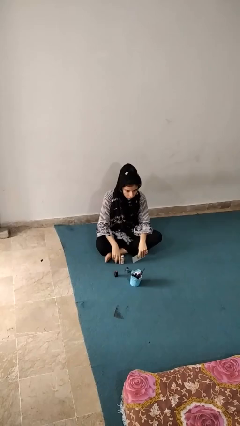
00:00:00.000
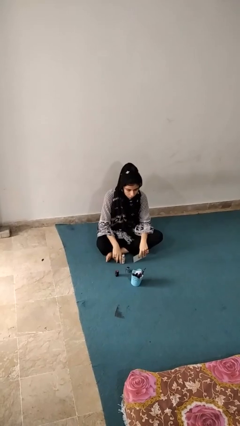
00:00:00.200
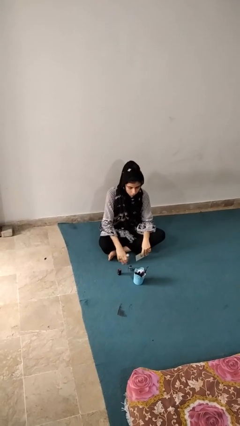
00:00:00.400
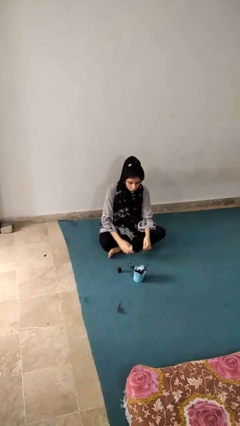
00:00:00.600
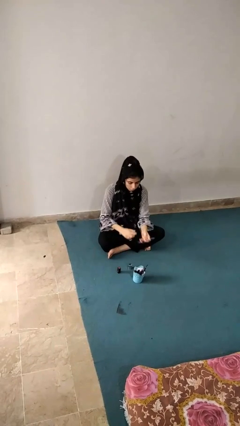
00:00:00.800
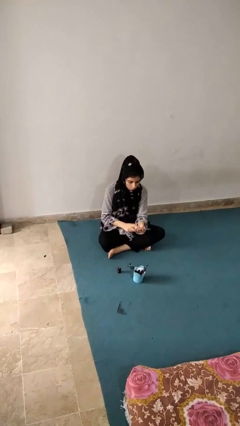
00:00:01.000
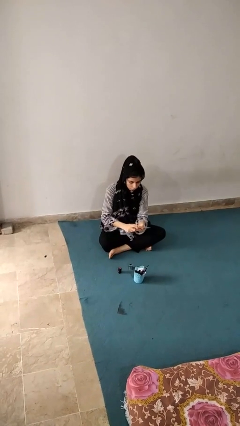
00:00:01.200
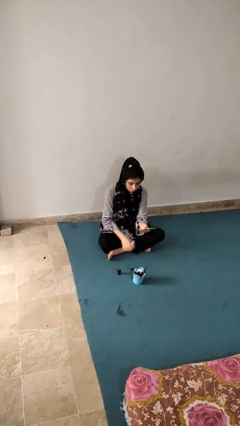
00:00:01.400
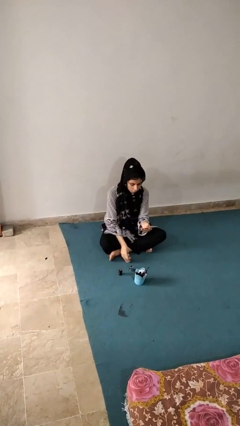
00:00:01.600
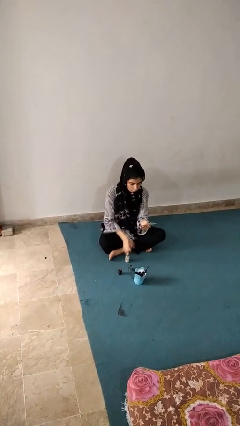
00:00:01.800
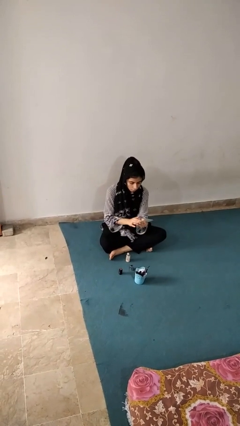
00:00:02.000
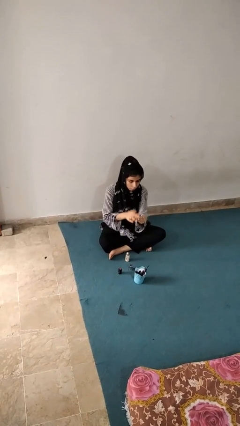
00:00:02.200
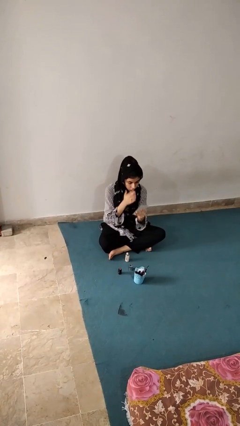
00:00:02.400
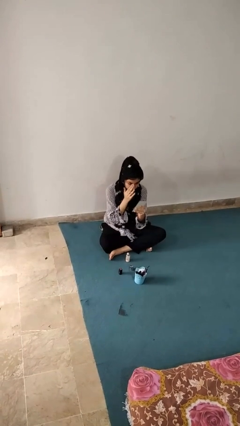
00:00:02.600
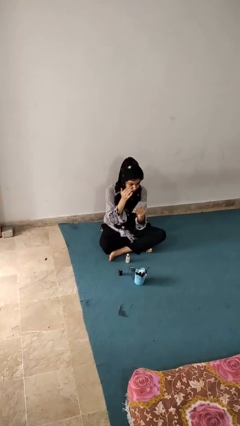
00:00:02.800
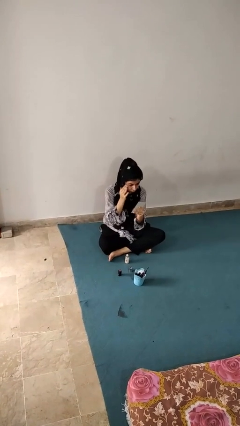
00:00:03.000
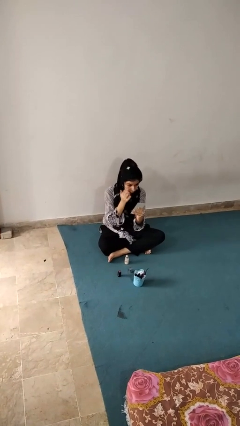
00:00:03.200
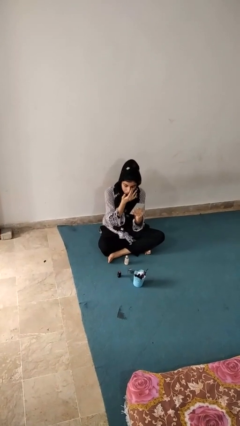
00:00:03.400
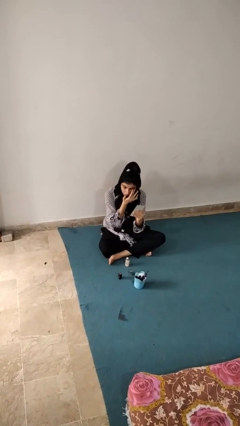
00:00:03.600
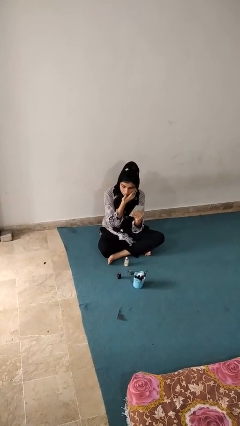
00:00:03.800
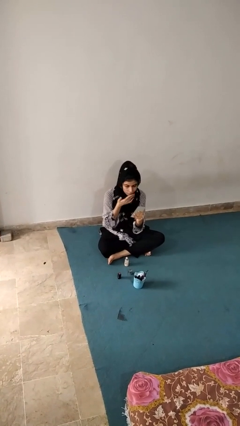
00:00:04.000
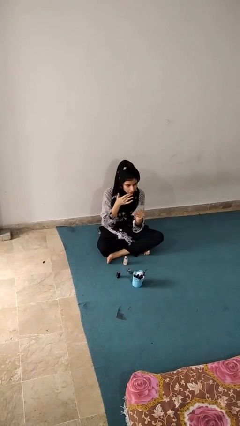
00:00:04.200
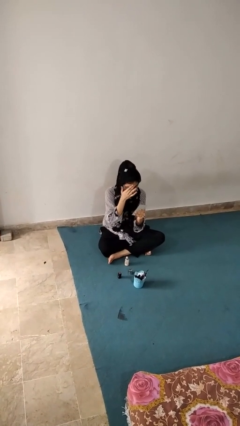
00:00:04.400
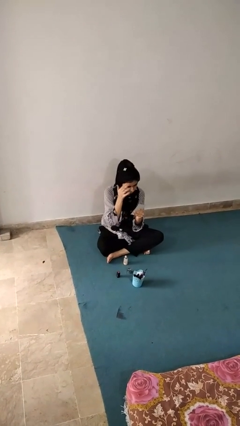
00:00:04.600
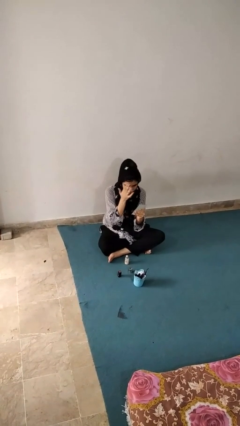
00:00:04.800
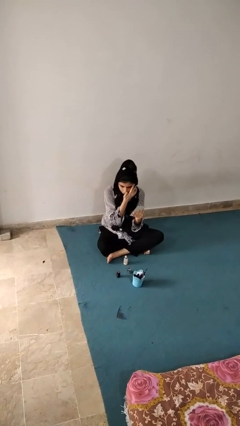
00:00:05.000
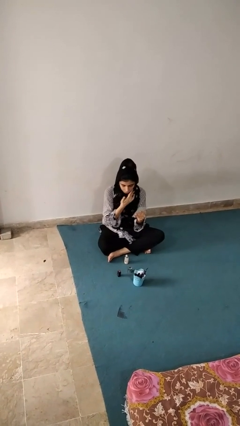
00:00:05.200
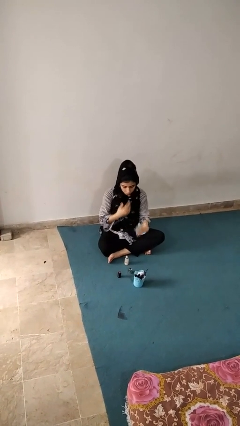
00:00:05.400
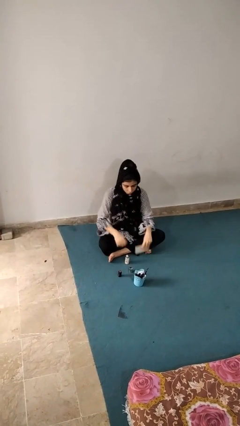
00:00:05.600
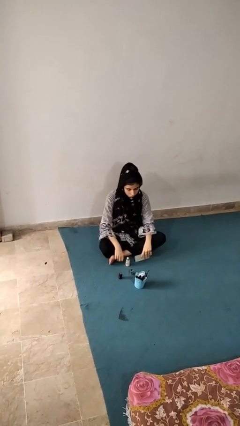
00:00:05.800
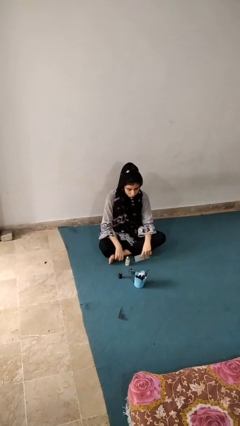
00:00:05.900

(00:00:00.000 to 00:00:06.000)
person applies foundation makeup

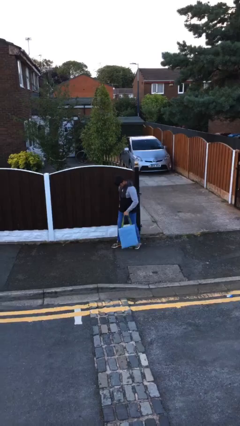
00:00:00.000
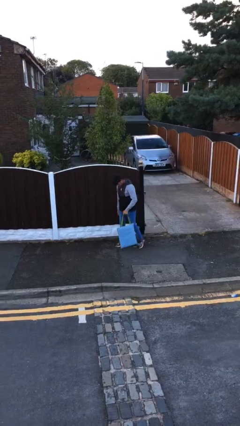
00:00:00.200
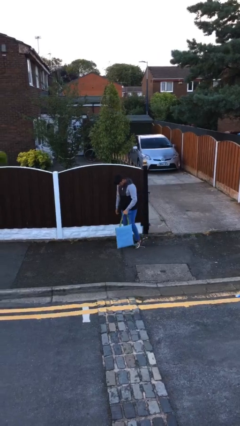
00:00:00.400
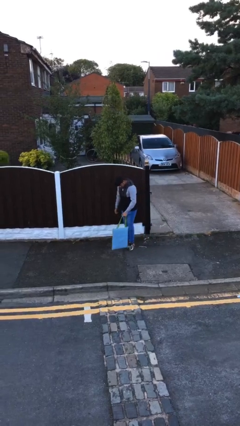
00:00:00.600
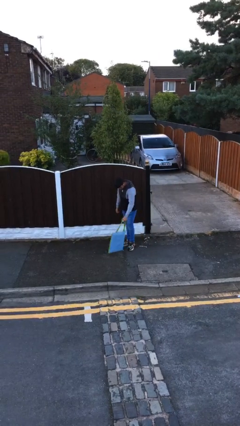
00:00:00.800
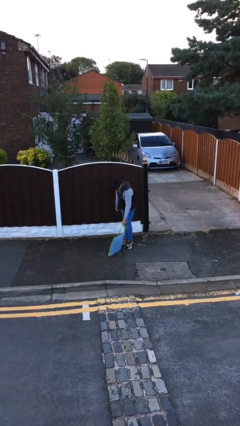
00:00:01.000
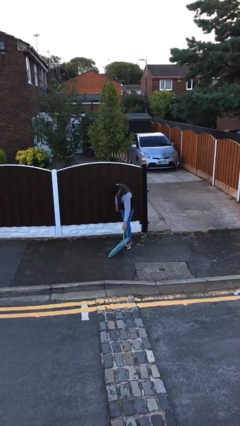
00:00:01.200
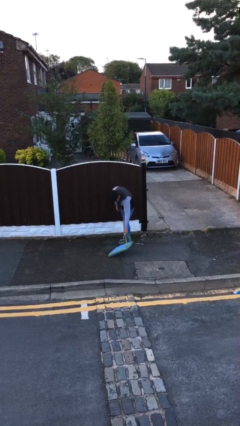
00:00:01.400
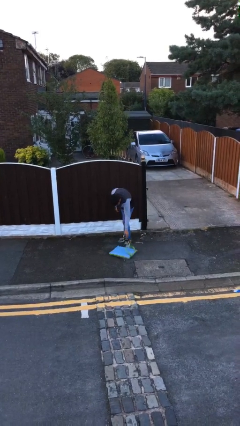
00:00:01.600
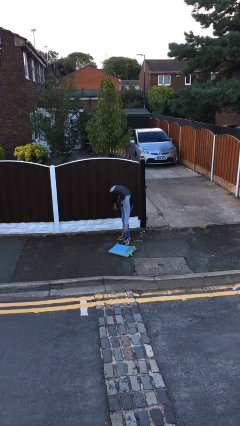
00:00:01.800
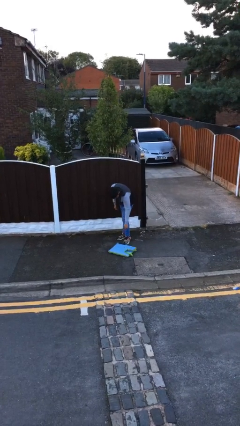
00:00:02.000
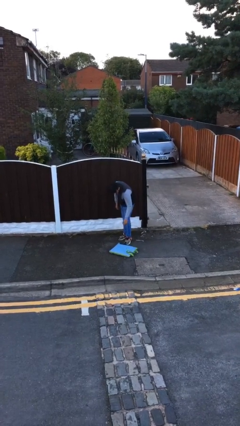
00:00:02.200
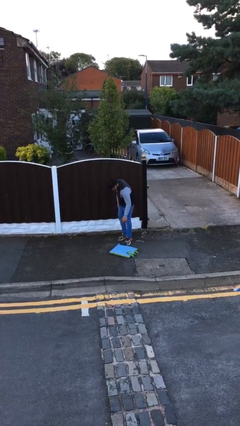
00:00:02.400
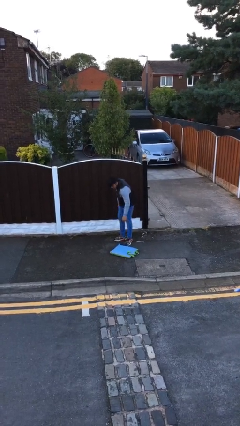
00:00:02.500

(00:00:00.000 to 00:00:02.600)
person puts down object on floor

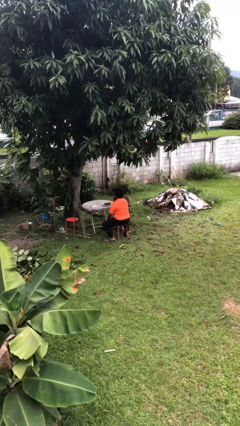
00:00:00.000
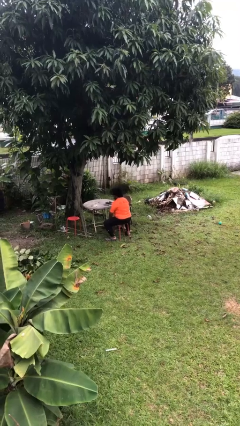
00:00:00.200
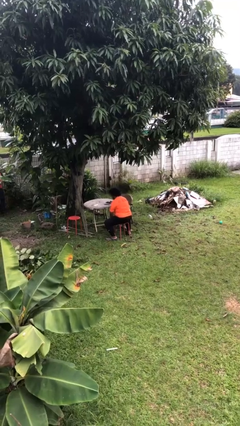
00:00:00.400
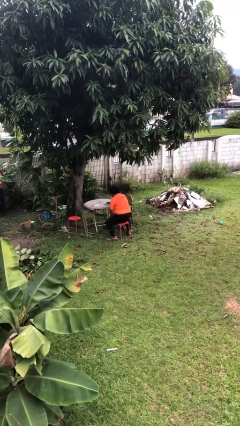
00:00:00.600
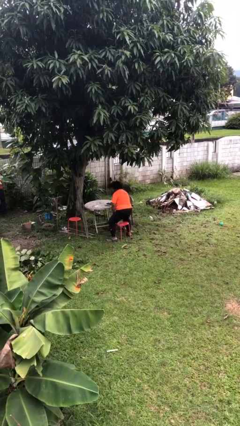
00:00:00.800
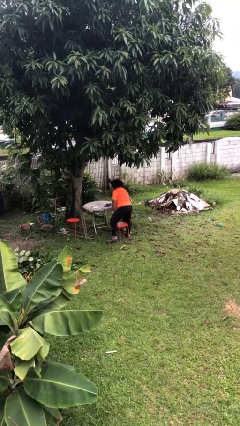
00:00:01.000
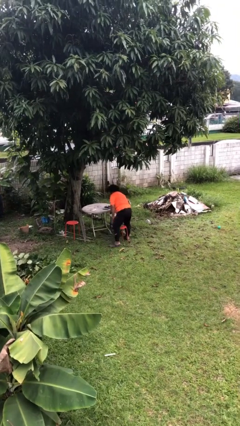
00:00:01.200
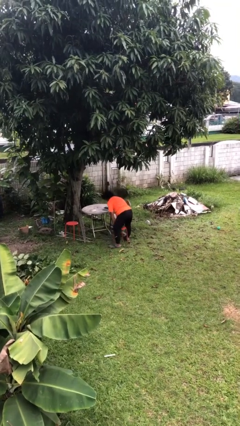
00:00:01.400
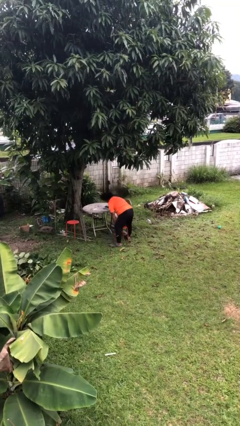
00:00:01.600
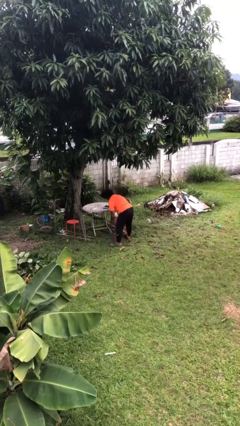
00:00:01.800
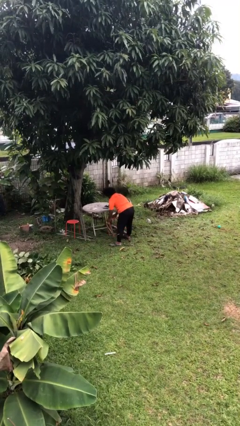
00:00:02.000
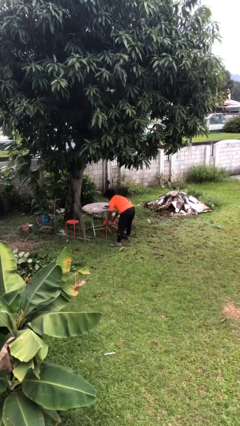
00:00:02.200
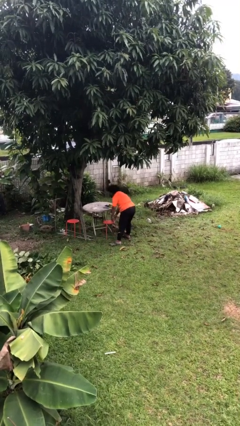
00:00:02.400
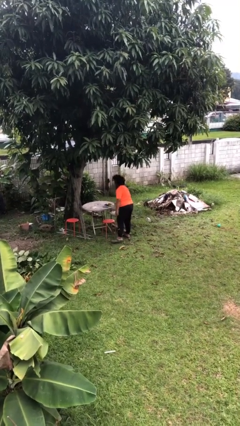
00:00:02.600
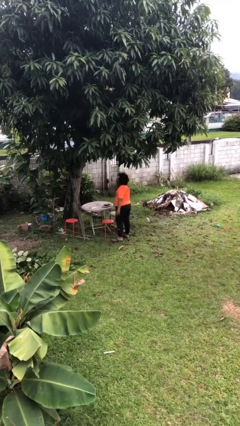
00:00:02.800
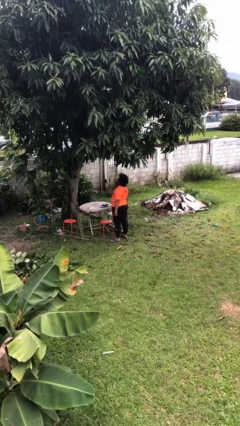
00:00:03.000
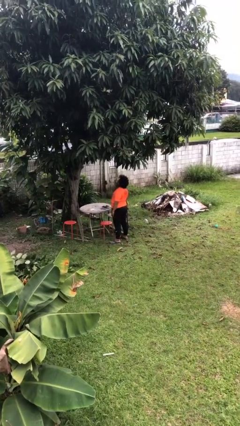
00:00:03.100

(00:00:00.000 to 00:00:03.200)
person stands up

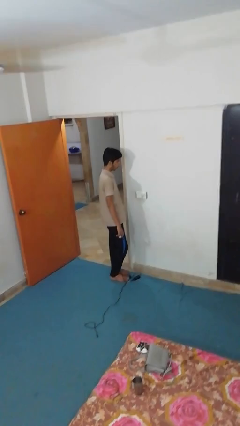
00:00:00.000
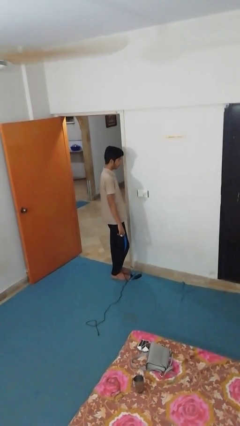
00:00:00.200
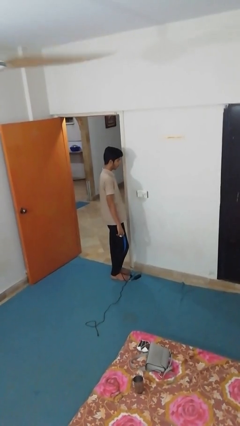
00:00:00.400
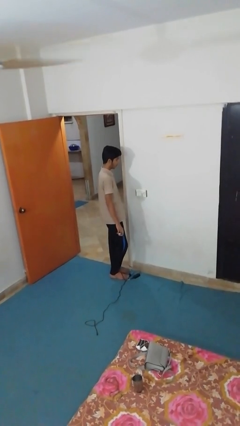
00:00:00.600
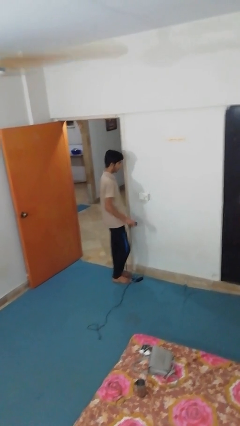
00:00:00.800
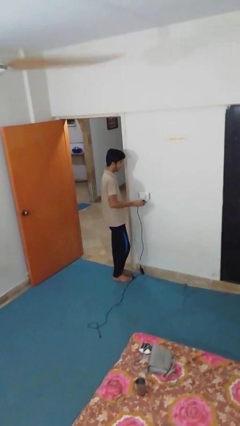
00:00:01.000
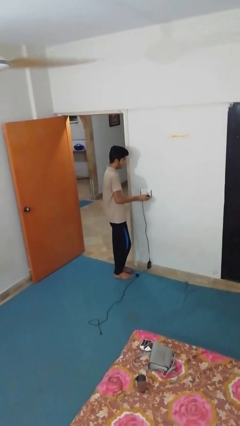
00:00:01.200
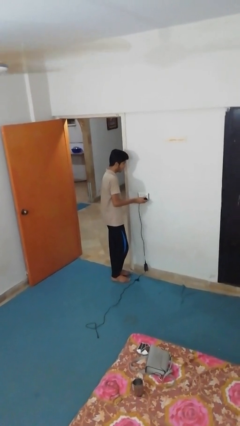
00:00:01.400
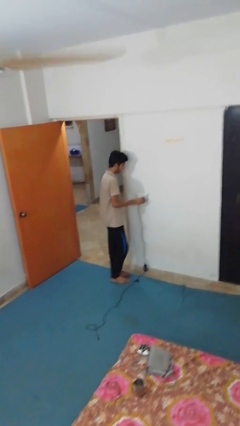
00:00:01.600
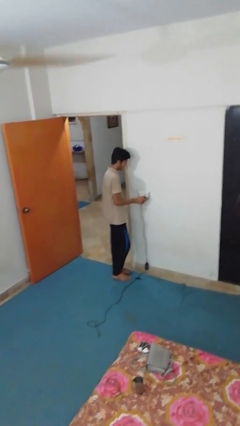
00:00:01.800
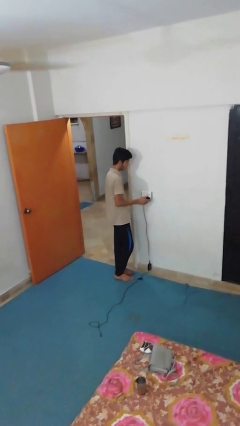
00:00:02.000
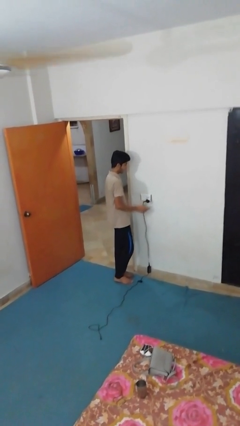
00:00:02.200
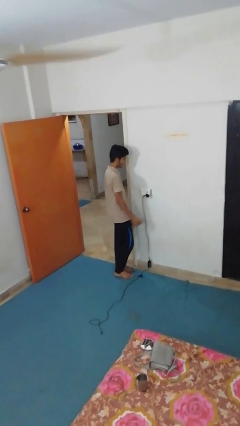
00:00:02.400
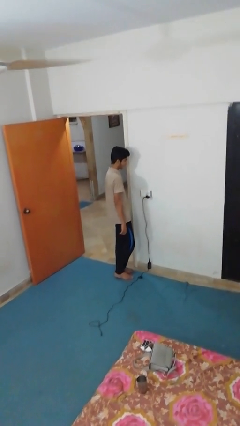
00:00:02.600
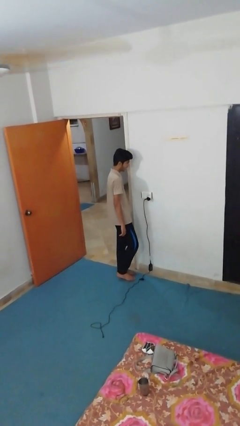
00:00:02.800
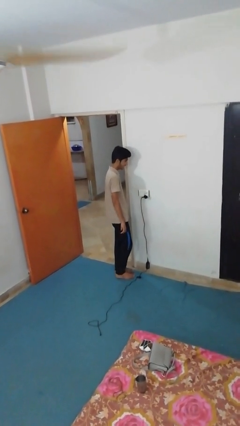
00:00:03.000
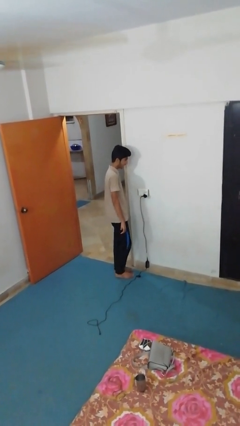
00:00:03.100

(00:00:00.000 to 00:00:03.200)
person plugs into electrical socket

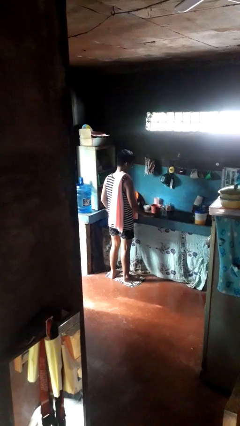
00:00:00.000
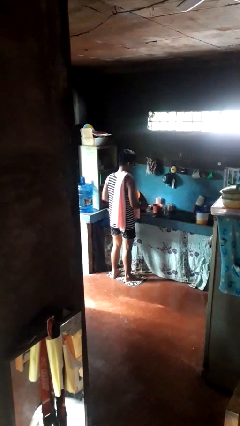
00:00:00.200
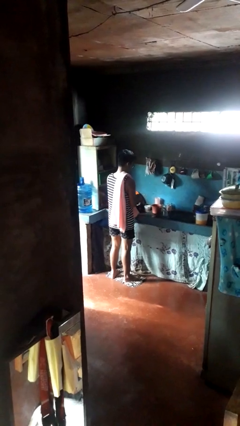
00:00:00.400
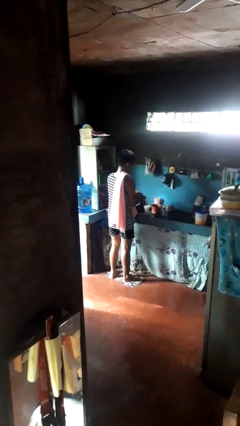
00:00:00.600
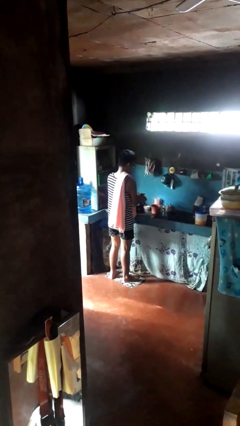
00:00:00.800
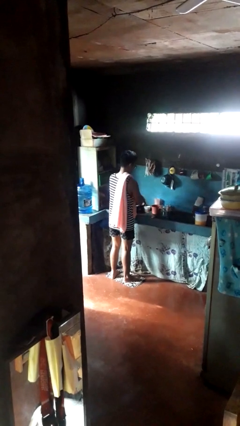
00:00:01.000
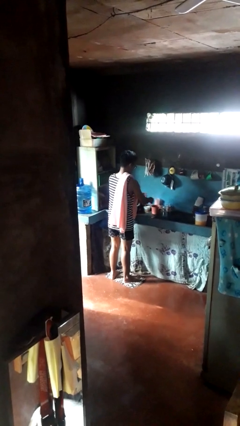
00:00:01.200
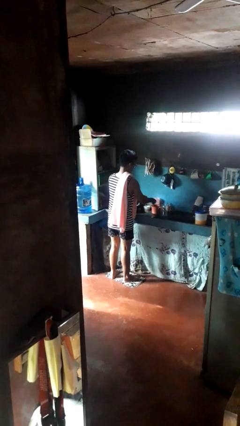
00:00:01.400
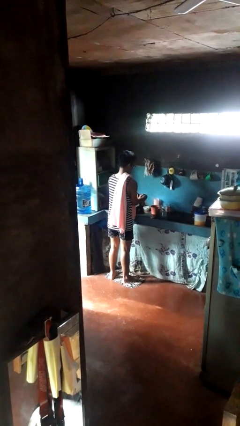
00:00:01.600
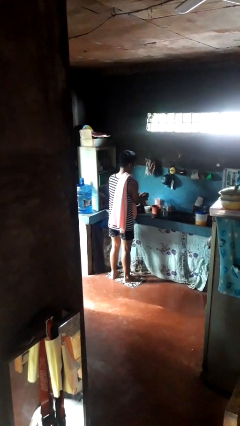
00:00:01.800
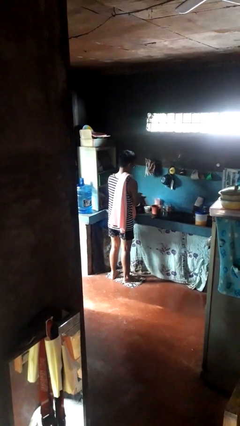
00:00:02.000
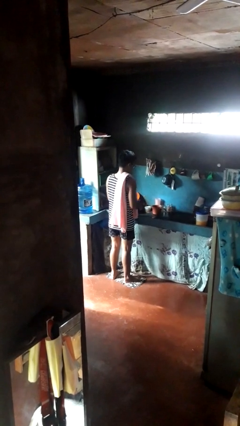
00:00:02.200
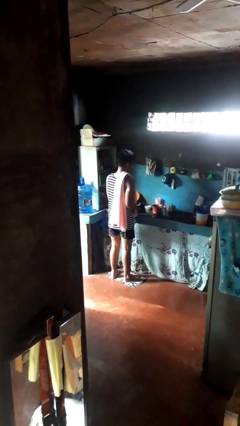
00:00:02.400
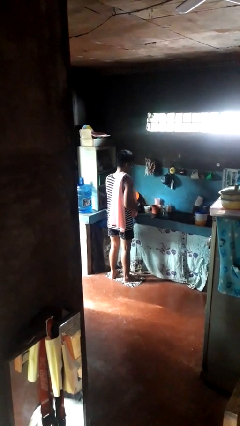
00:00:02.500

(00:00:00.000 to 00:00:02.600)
person washes hands
